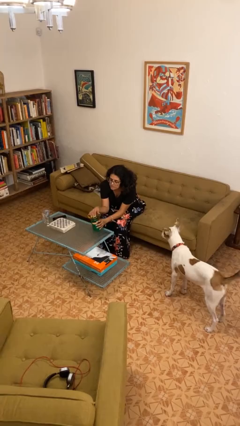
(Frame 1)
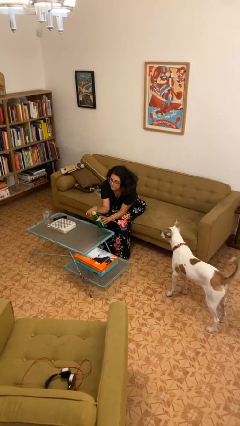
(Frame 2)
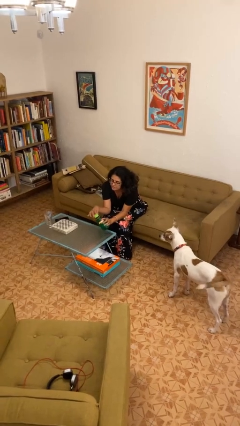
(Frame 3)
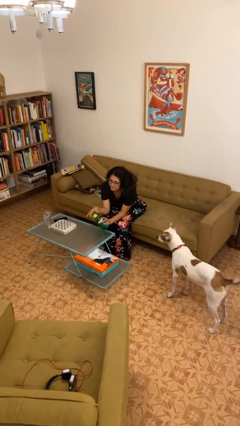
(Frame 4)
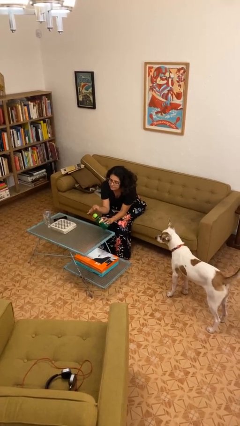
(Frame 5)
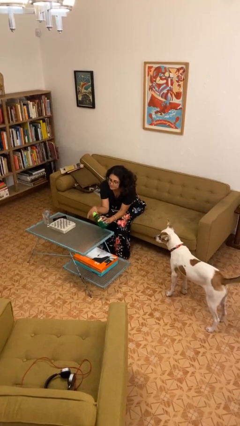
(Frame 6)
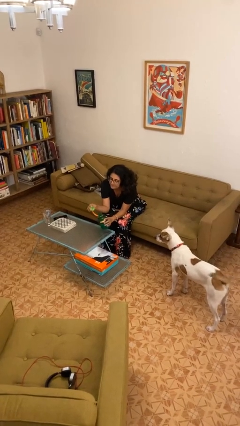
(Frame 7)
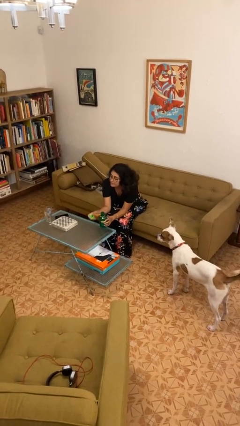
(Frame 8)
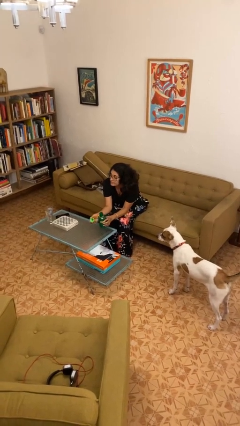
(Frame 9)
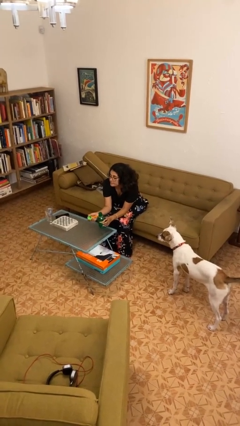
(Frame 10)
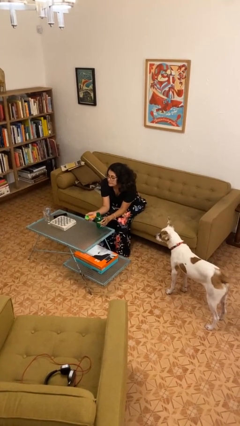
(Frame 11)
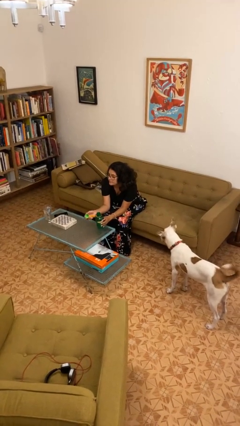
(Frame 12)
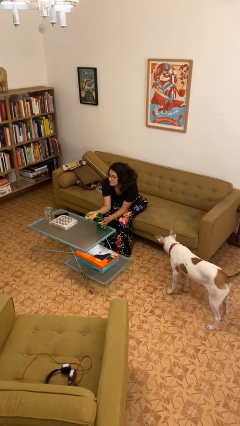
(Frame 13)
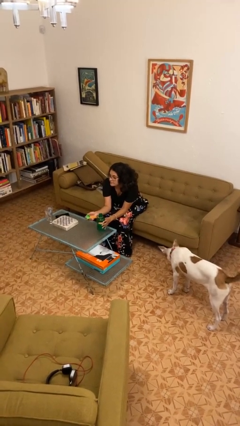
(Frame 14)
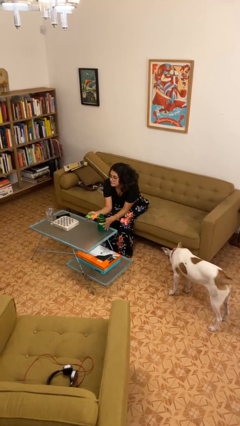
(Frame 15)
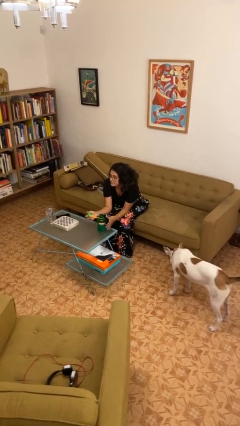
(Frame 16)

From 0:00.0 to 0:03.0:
person unscrews lid from bottle

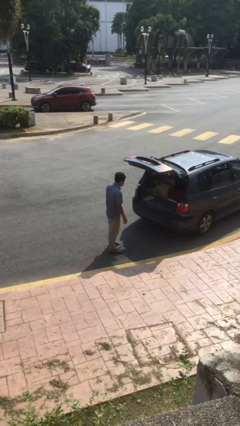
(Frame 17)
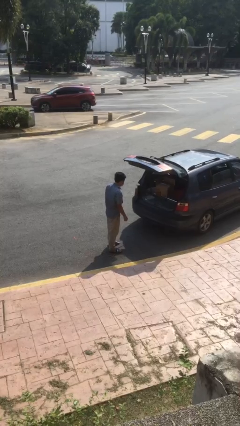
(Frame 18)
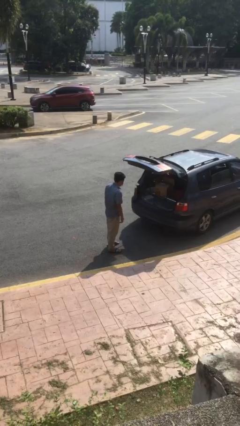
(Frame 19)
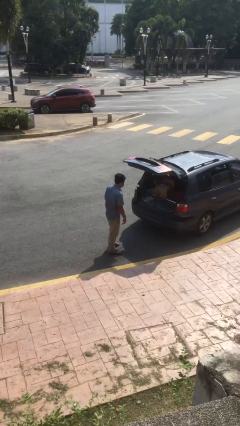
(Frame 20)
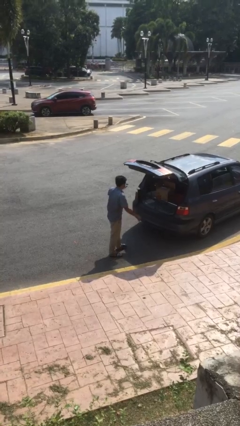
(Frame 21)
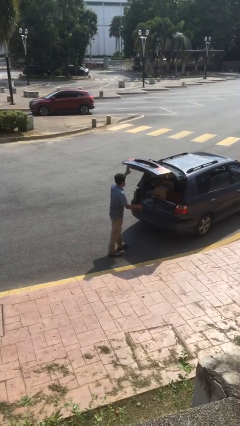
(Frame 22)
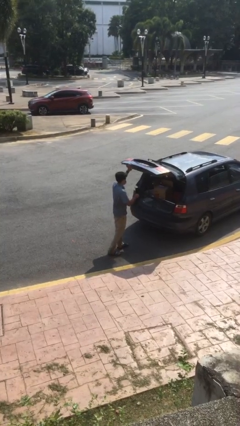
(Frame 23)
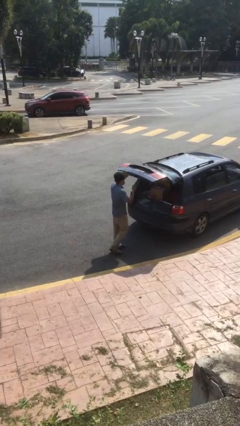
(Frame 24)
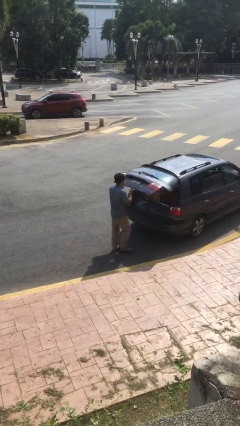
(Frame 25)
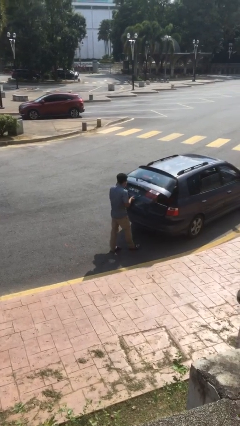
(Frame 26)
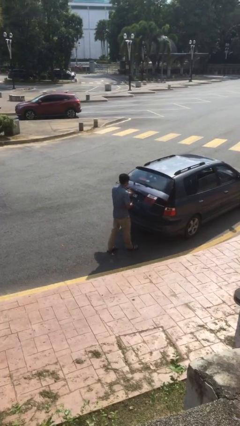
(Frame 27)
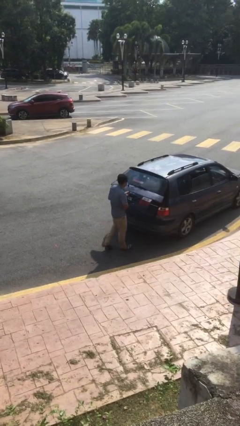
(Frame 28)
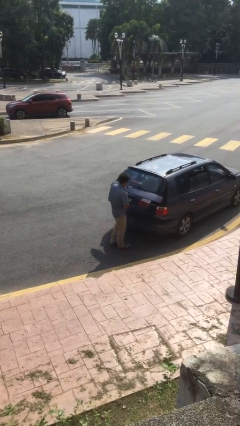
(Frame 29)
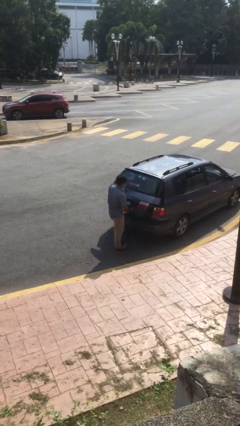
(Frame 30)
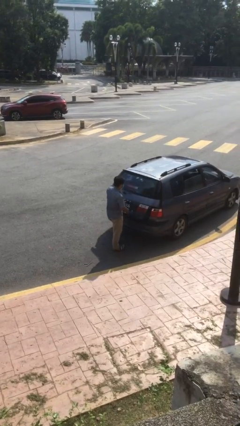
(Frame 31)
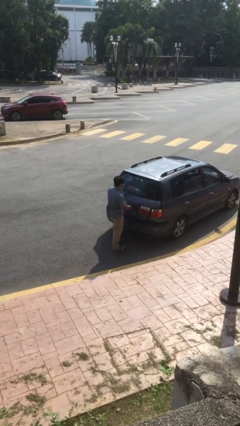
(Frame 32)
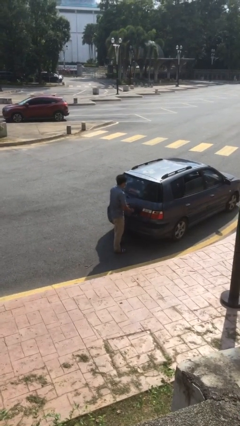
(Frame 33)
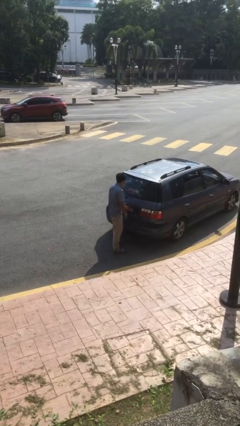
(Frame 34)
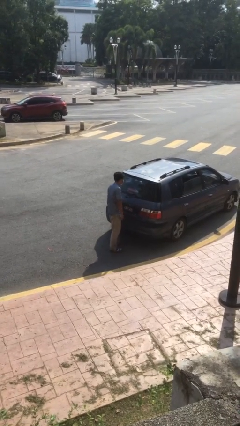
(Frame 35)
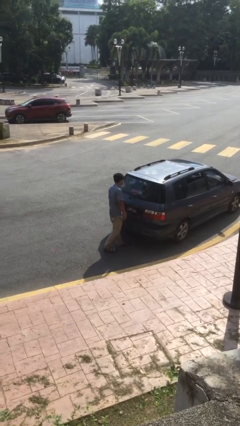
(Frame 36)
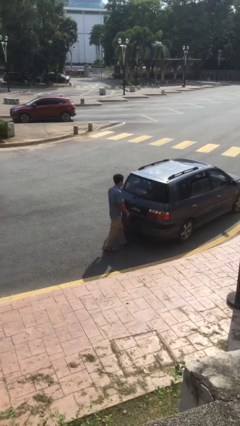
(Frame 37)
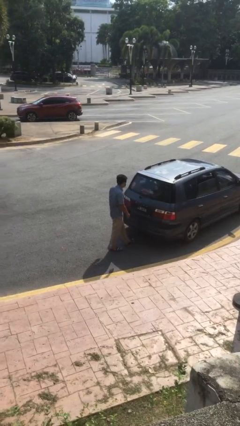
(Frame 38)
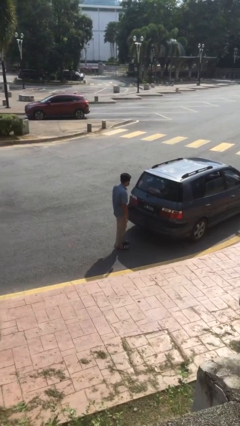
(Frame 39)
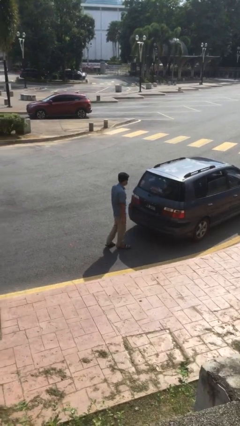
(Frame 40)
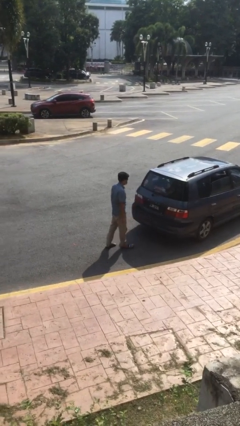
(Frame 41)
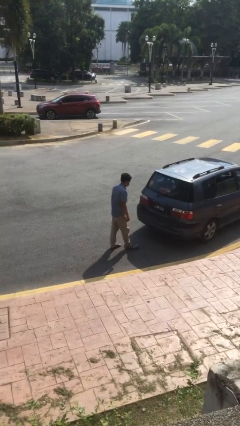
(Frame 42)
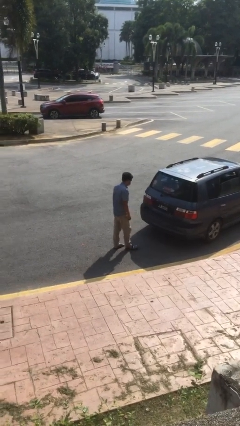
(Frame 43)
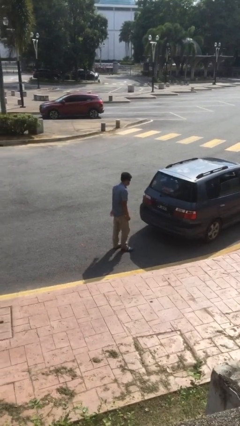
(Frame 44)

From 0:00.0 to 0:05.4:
person closes car trunk

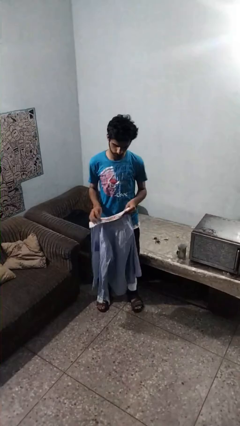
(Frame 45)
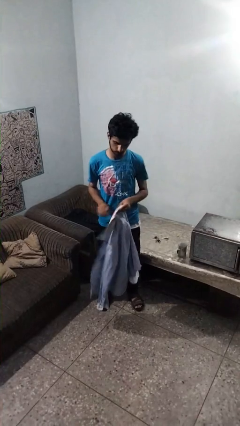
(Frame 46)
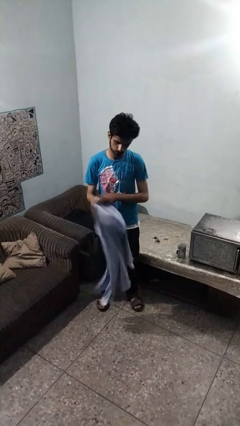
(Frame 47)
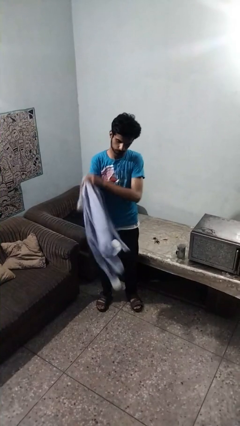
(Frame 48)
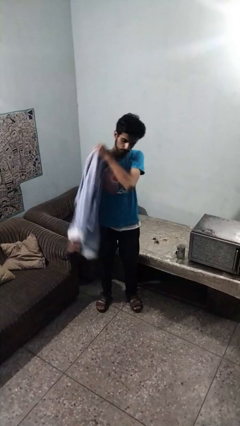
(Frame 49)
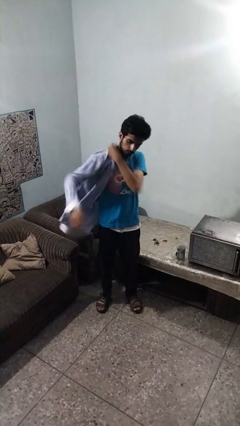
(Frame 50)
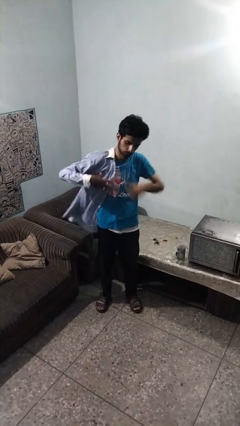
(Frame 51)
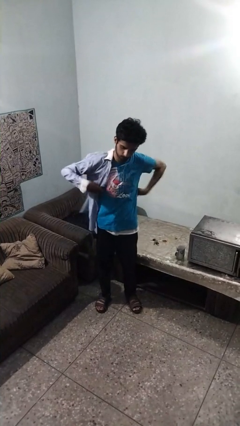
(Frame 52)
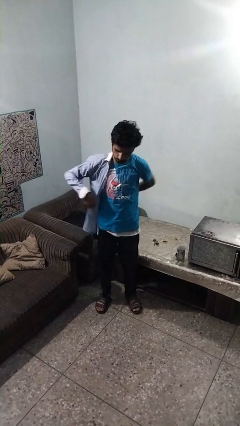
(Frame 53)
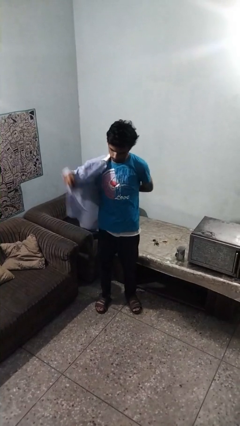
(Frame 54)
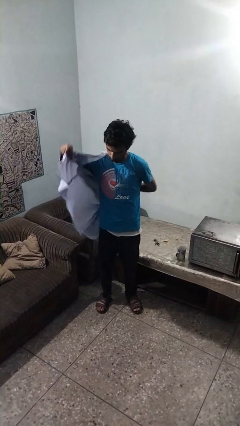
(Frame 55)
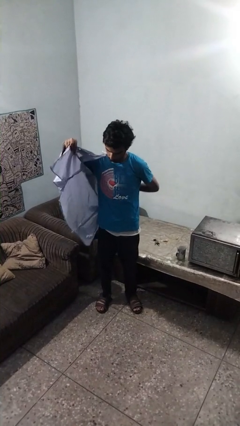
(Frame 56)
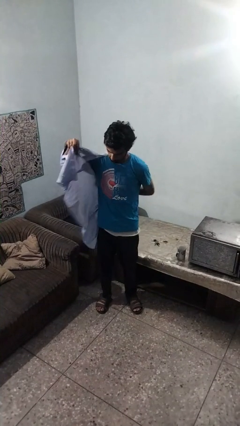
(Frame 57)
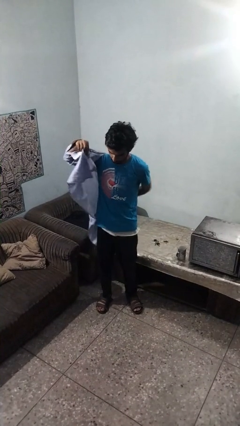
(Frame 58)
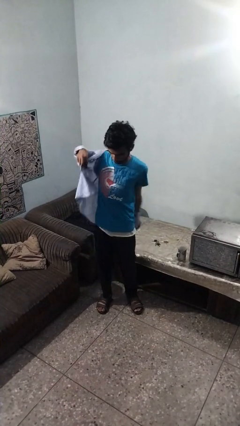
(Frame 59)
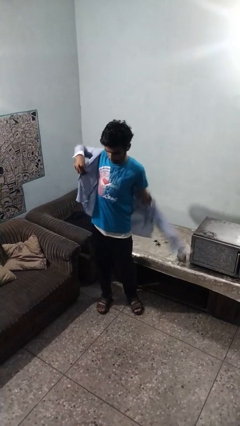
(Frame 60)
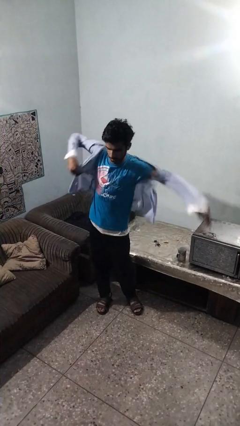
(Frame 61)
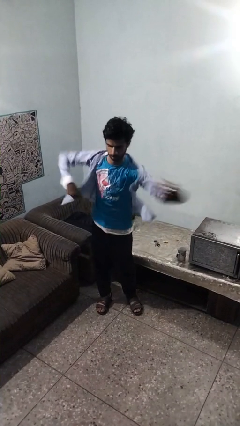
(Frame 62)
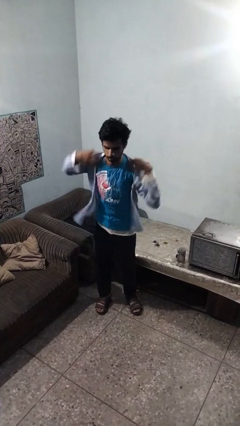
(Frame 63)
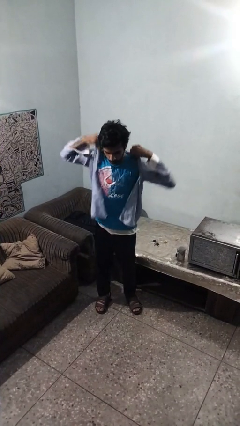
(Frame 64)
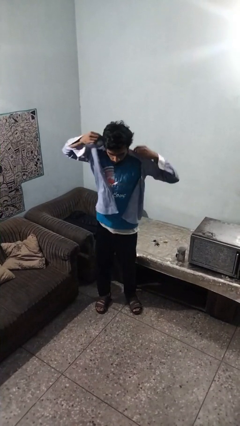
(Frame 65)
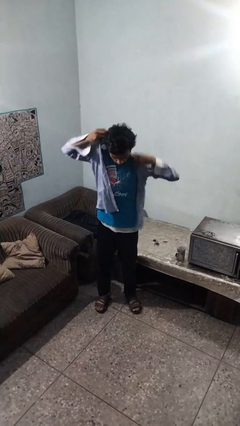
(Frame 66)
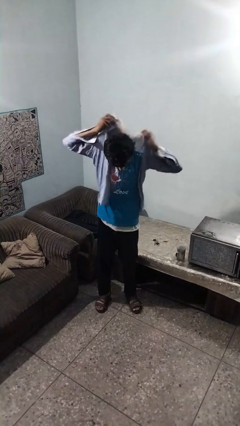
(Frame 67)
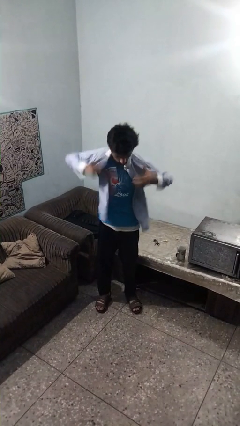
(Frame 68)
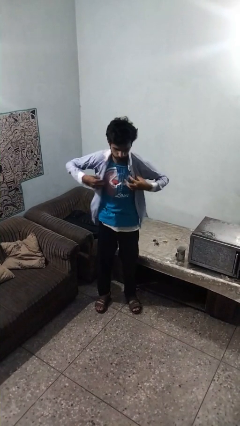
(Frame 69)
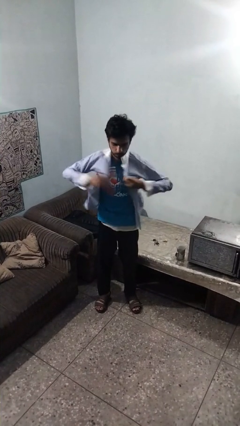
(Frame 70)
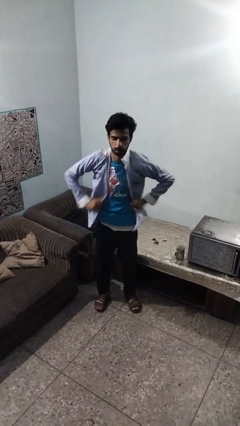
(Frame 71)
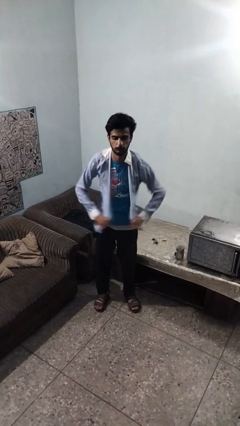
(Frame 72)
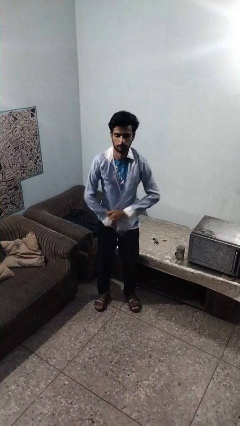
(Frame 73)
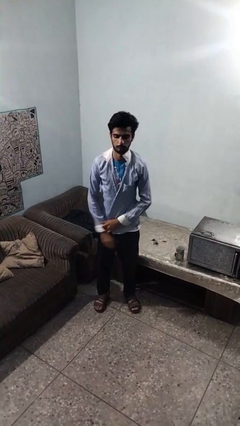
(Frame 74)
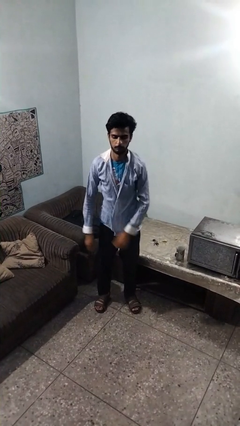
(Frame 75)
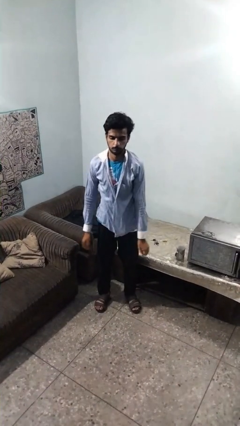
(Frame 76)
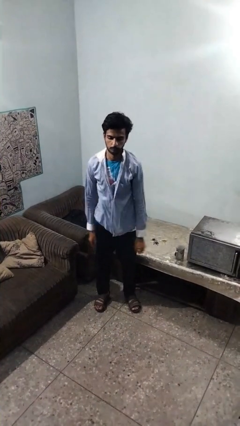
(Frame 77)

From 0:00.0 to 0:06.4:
person puts on shirt

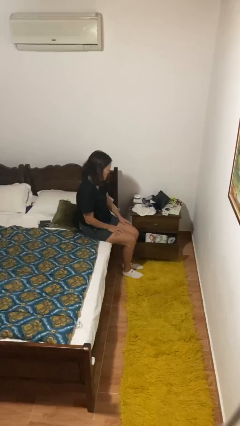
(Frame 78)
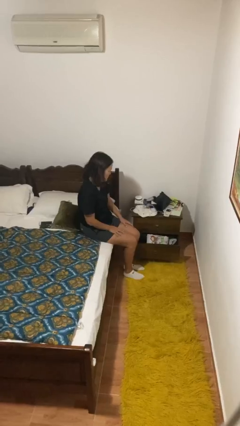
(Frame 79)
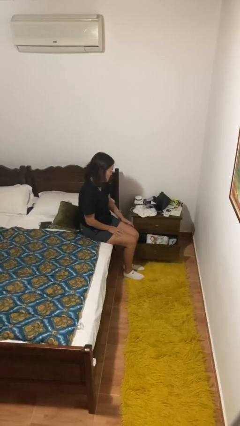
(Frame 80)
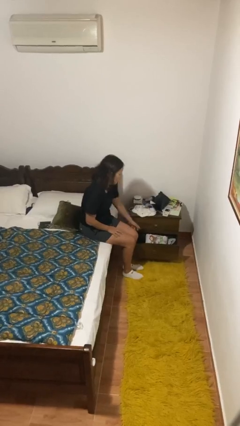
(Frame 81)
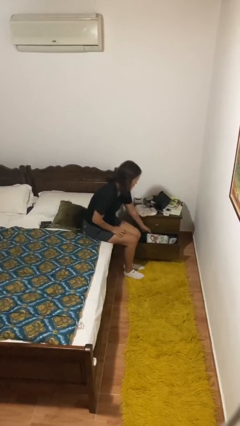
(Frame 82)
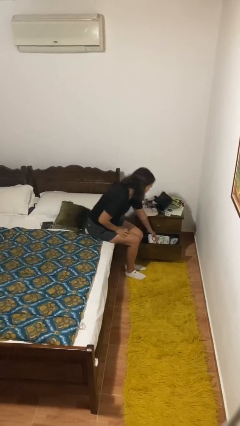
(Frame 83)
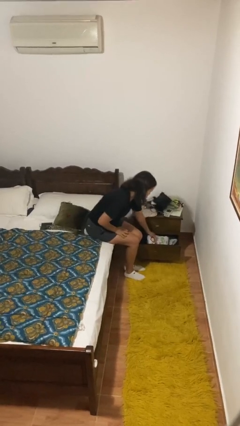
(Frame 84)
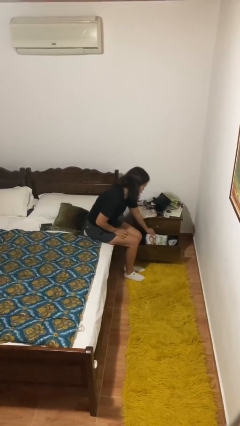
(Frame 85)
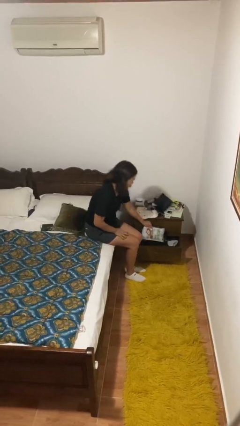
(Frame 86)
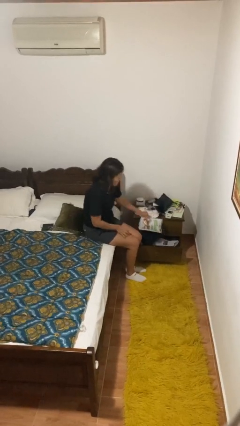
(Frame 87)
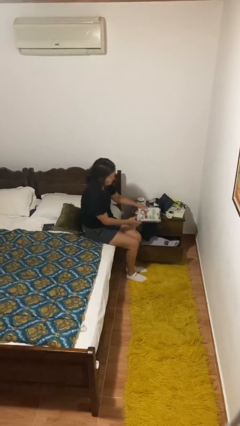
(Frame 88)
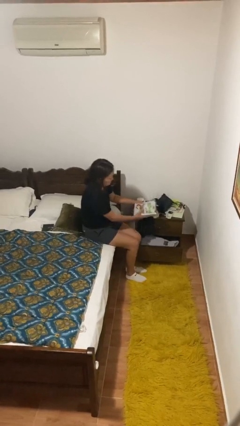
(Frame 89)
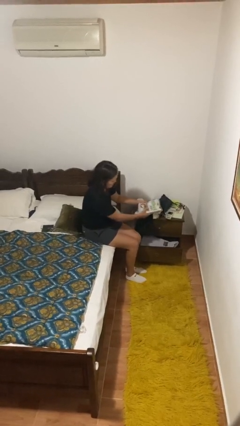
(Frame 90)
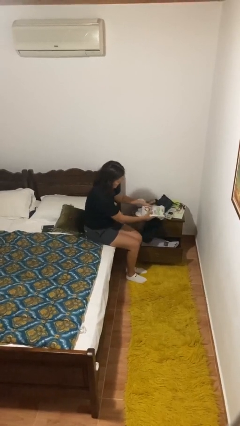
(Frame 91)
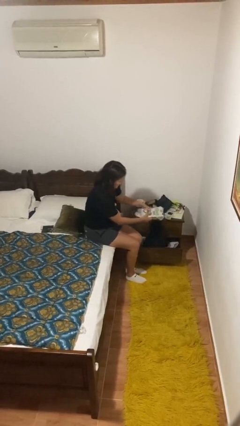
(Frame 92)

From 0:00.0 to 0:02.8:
person picks up object from cabinet
